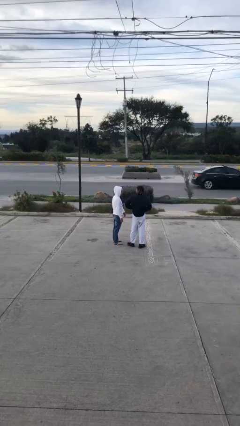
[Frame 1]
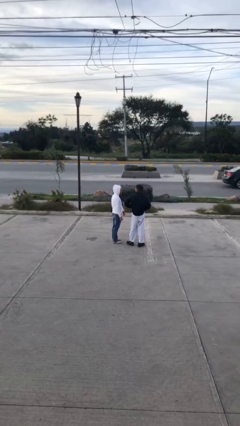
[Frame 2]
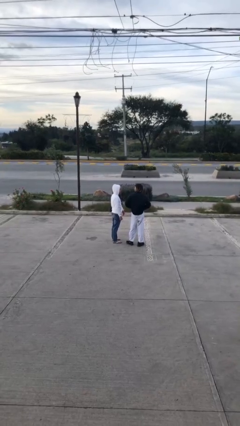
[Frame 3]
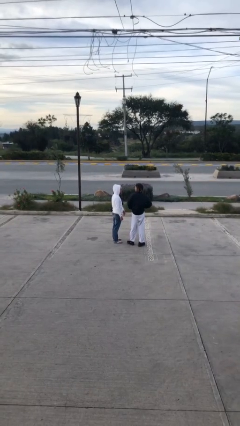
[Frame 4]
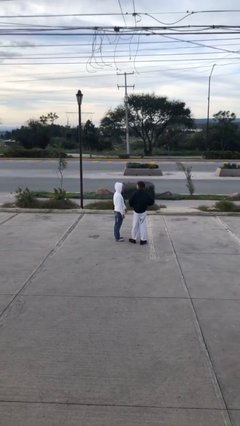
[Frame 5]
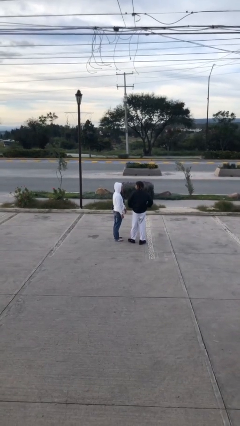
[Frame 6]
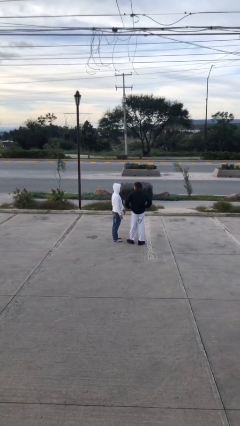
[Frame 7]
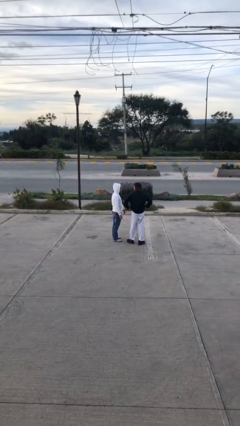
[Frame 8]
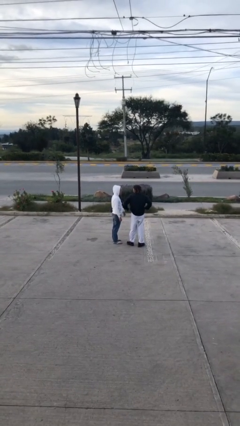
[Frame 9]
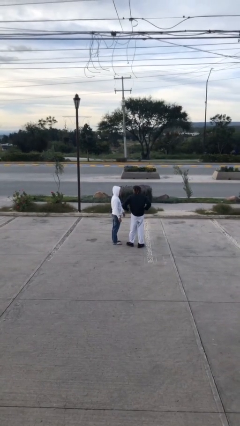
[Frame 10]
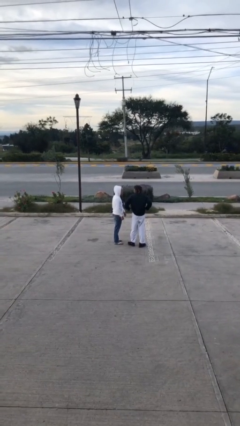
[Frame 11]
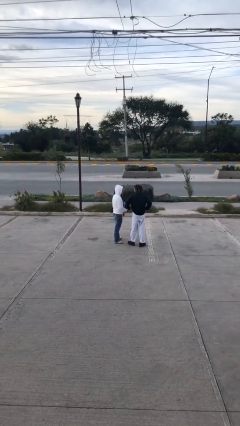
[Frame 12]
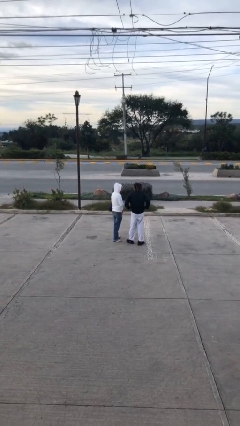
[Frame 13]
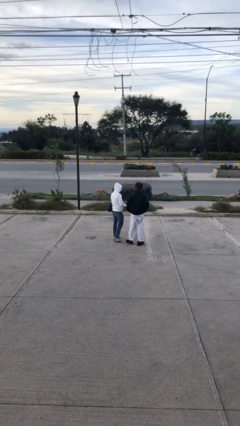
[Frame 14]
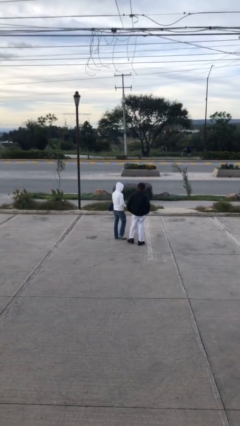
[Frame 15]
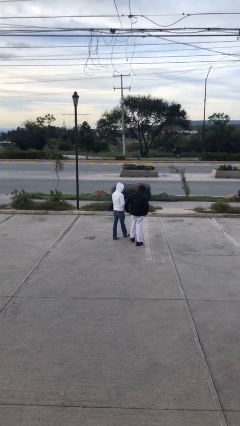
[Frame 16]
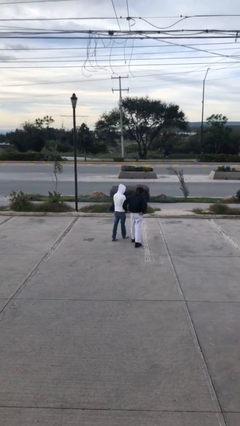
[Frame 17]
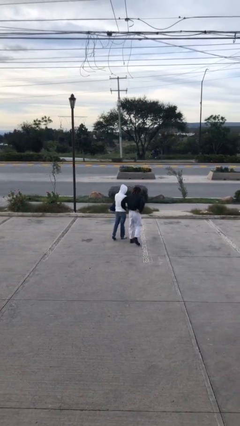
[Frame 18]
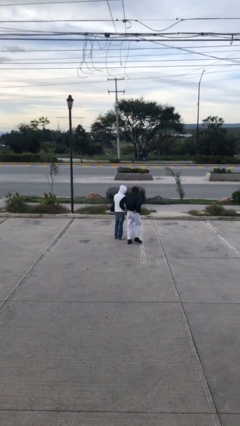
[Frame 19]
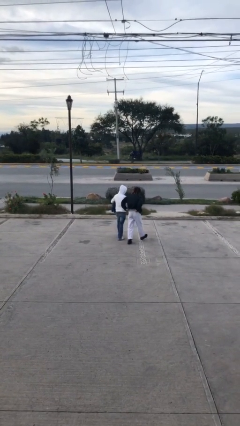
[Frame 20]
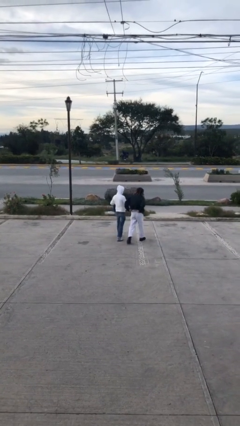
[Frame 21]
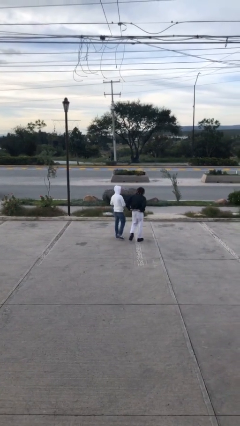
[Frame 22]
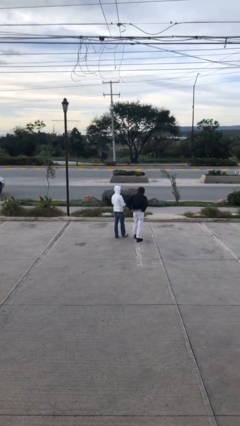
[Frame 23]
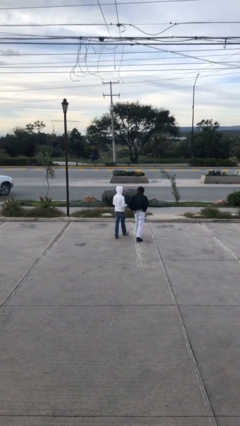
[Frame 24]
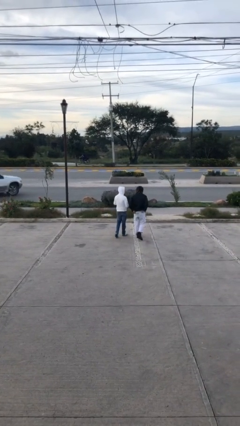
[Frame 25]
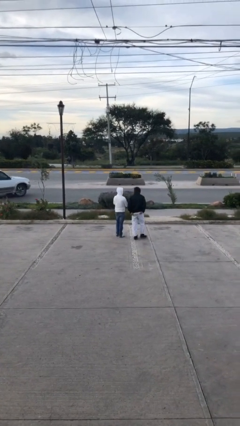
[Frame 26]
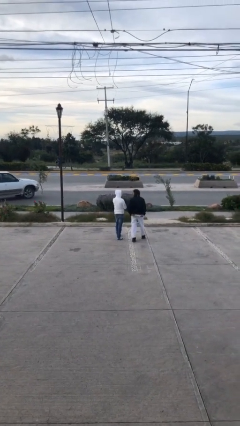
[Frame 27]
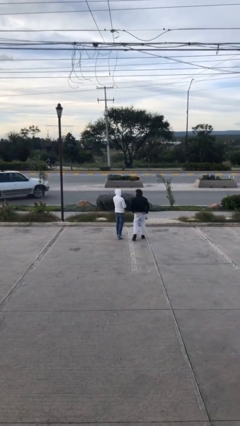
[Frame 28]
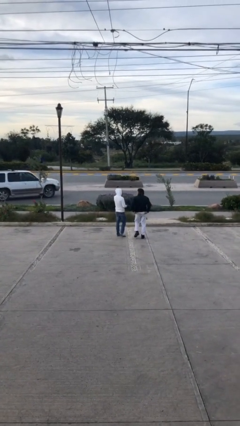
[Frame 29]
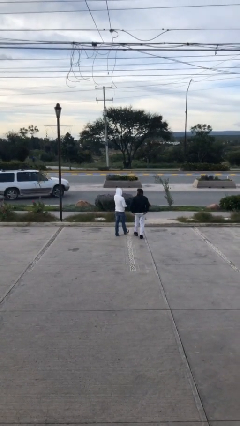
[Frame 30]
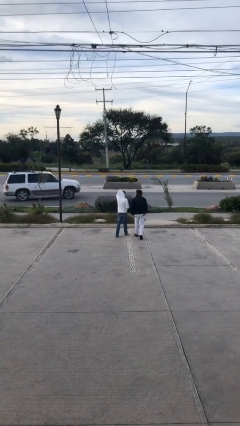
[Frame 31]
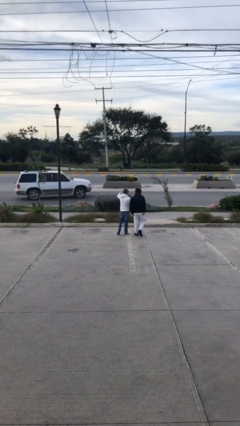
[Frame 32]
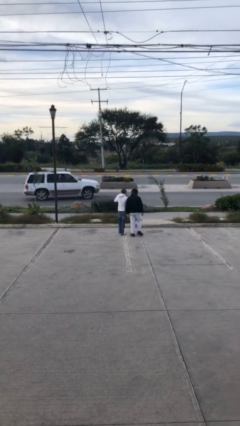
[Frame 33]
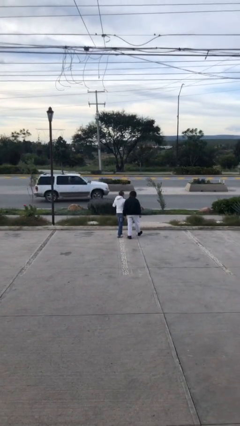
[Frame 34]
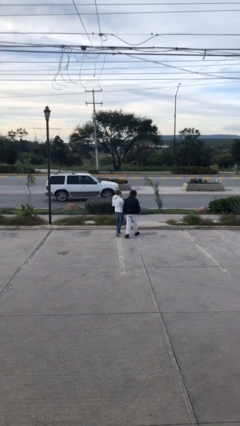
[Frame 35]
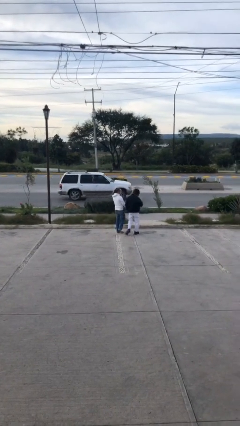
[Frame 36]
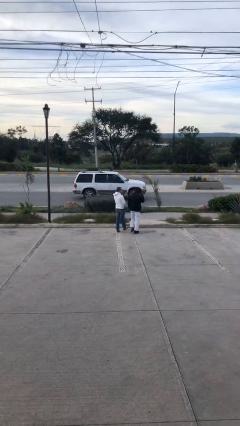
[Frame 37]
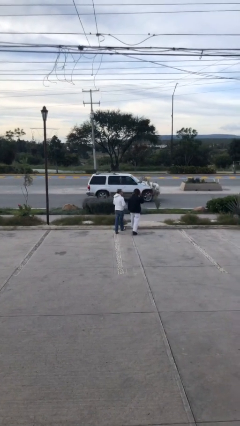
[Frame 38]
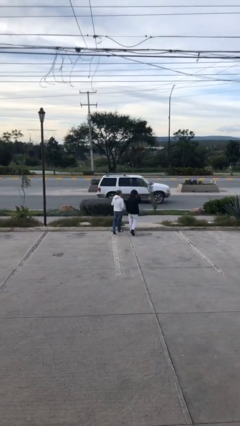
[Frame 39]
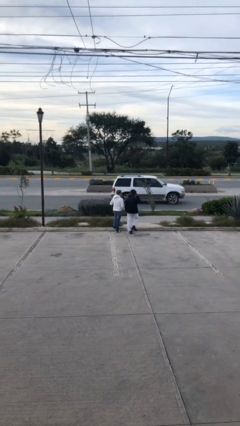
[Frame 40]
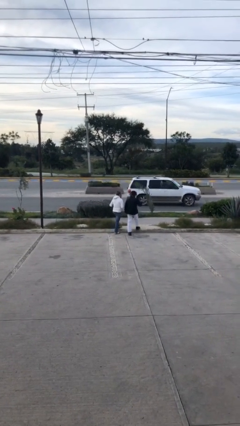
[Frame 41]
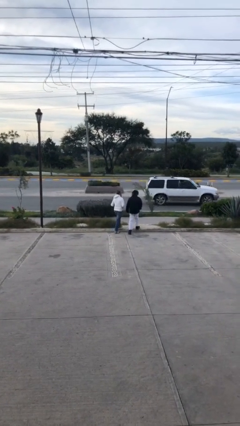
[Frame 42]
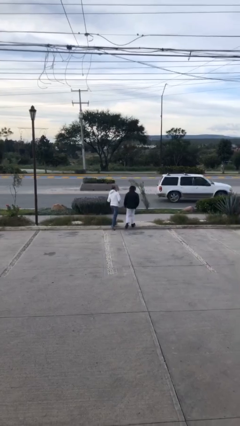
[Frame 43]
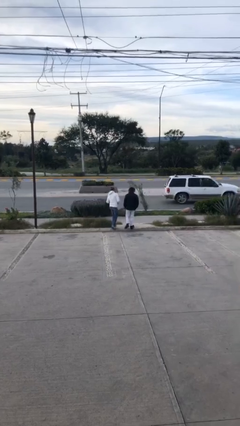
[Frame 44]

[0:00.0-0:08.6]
person talks to person

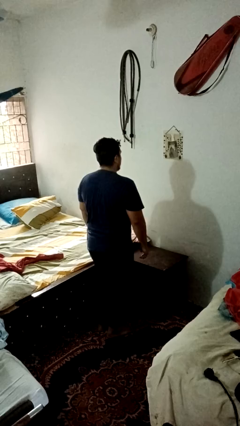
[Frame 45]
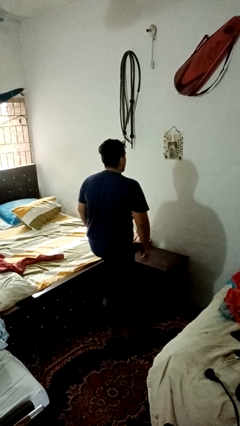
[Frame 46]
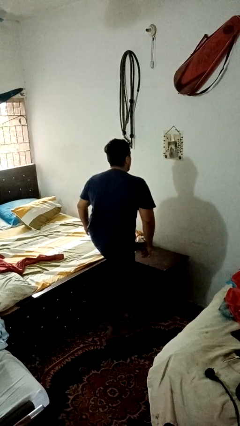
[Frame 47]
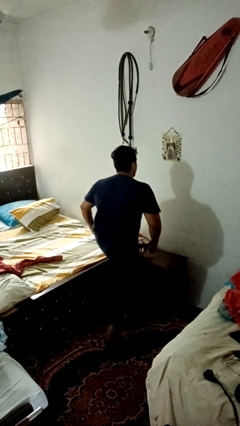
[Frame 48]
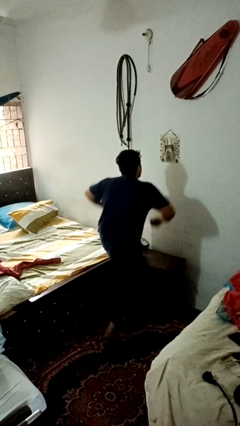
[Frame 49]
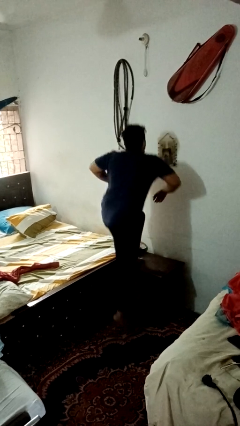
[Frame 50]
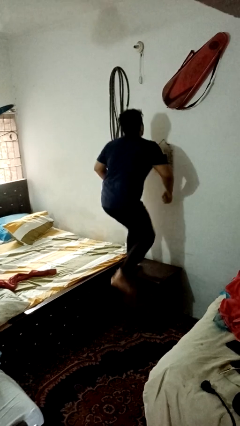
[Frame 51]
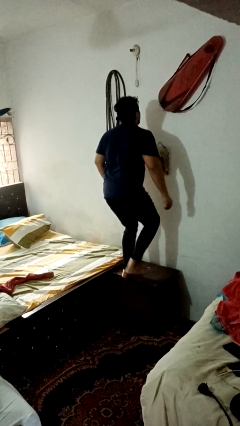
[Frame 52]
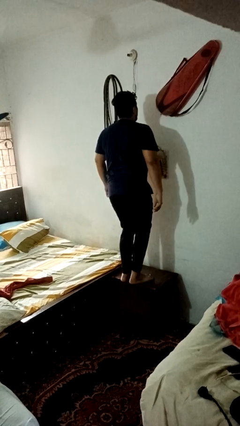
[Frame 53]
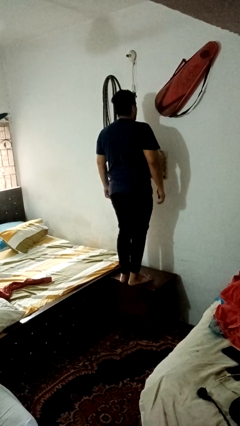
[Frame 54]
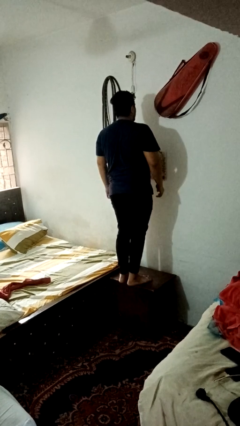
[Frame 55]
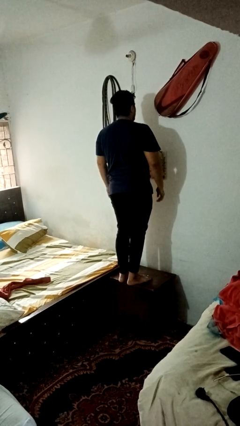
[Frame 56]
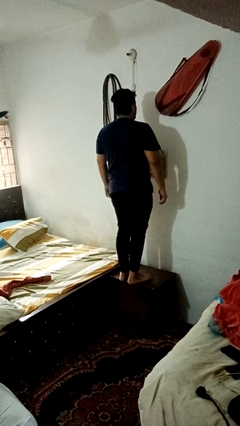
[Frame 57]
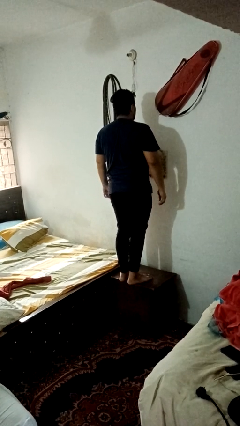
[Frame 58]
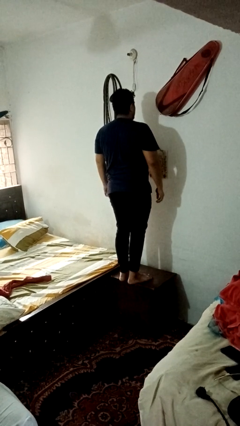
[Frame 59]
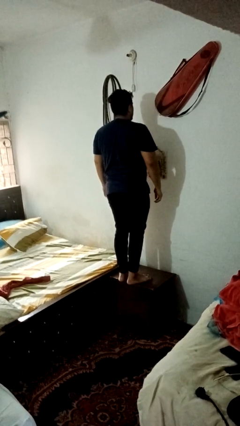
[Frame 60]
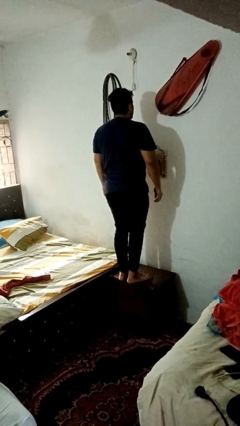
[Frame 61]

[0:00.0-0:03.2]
person climbs on table

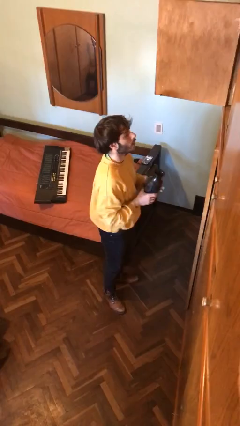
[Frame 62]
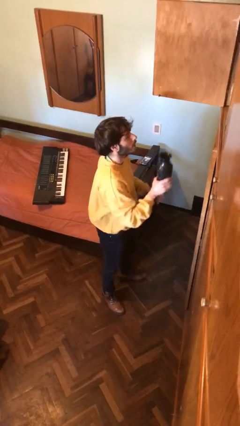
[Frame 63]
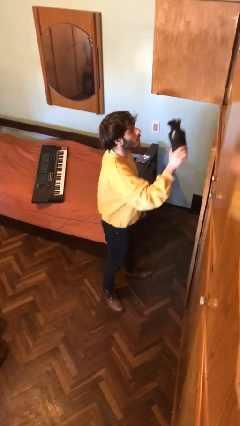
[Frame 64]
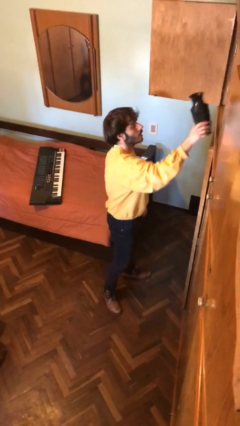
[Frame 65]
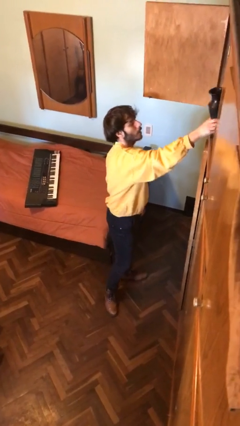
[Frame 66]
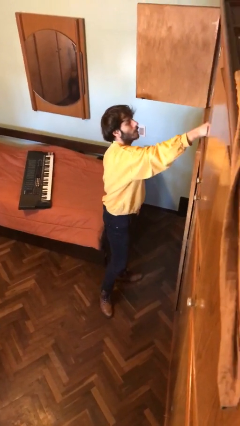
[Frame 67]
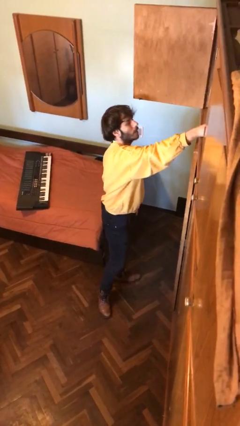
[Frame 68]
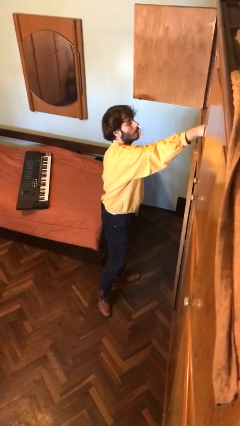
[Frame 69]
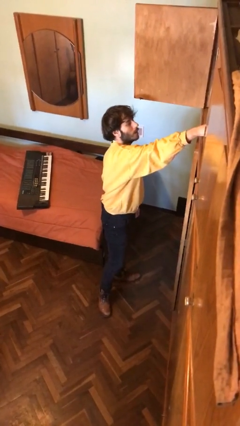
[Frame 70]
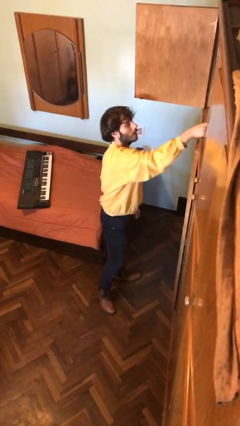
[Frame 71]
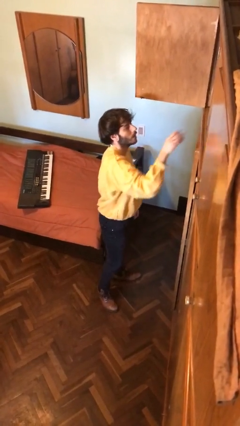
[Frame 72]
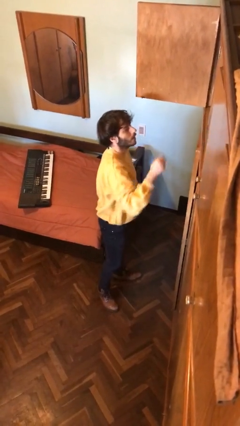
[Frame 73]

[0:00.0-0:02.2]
person puts down object into cabinet

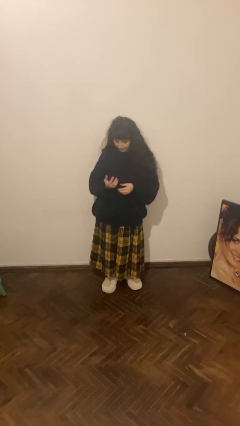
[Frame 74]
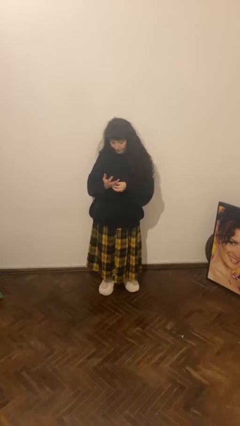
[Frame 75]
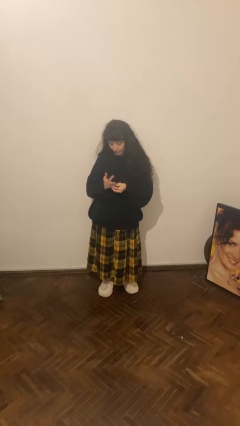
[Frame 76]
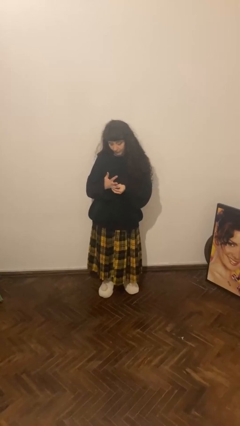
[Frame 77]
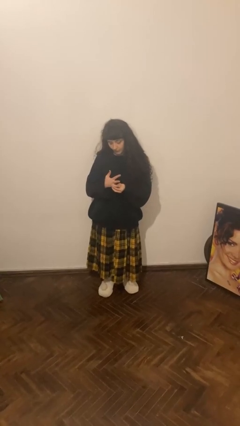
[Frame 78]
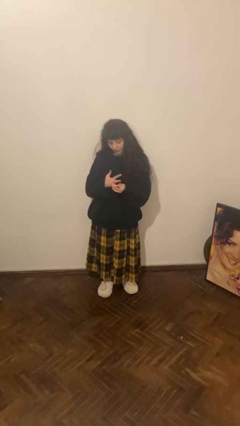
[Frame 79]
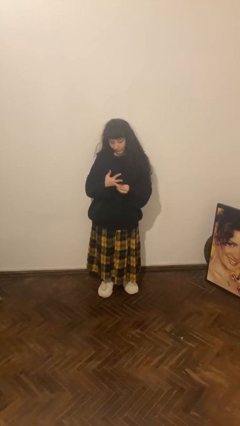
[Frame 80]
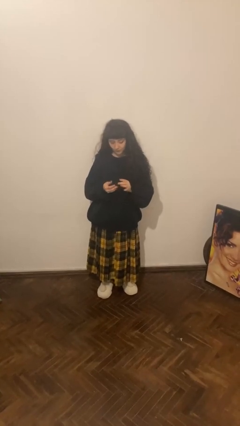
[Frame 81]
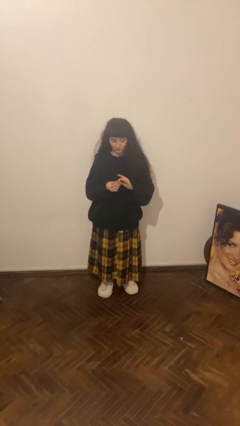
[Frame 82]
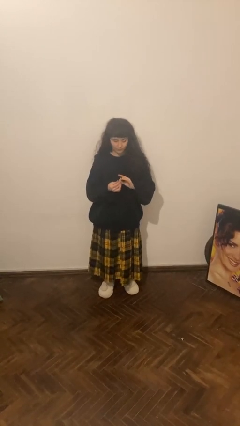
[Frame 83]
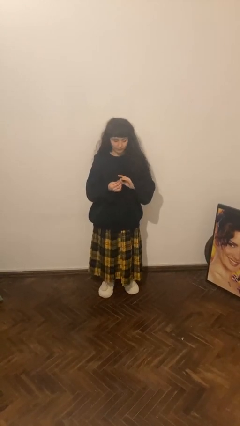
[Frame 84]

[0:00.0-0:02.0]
person takes off ring

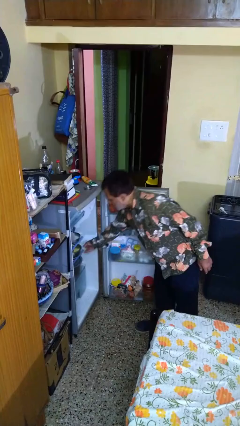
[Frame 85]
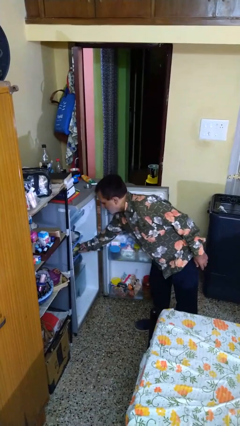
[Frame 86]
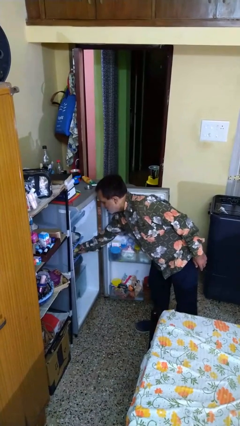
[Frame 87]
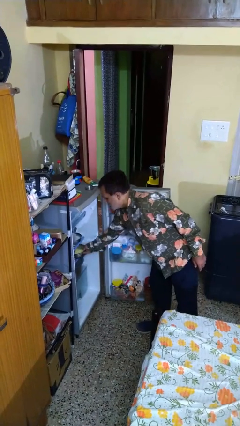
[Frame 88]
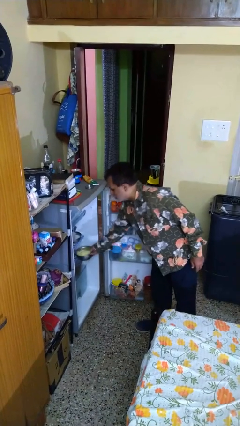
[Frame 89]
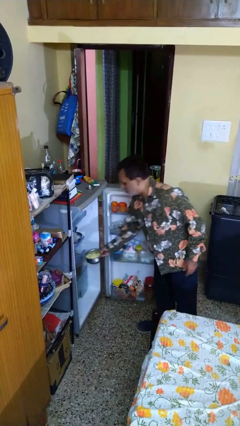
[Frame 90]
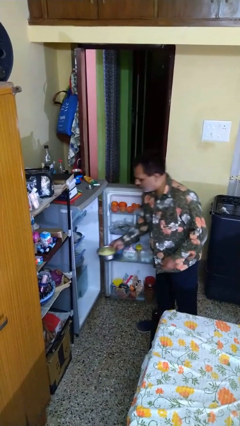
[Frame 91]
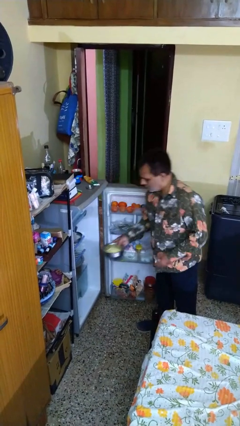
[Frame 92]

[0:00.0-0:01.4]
person takes object from refrigerator
